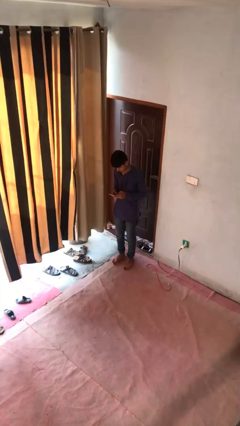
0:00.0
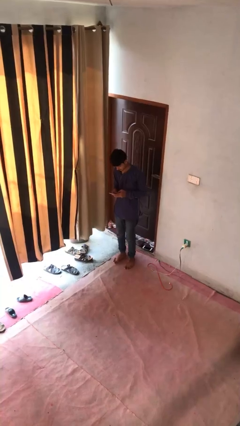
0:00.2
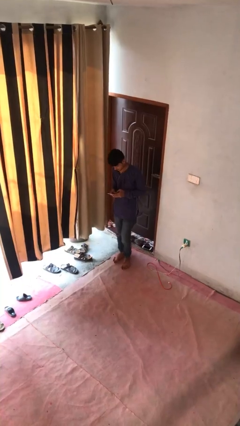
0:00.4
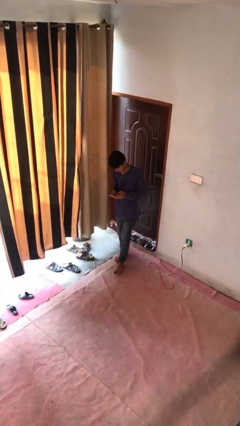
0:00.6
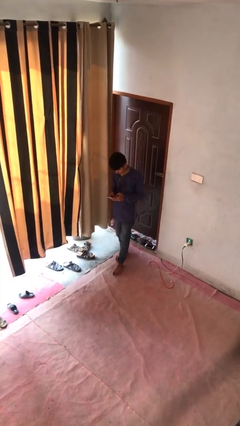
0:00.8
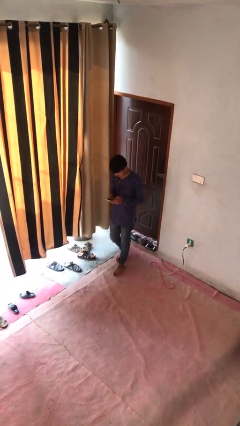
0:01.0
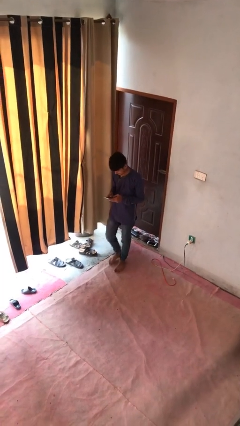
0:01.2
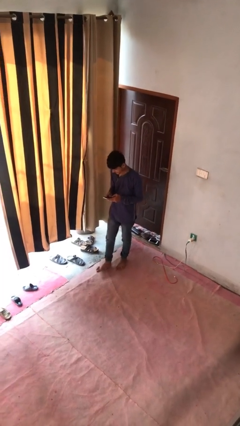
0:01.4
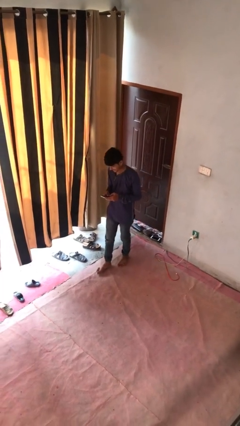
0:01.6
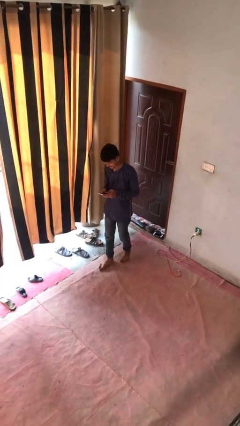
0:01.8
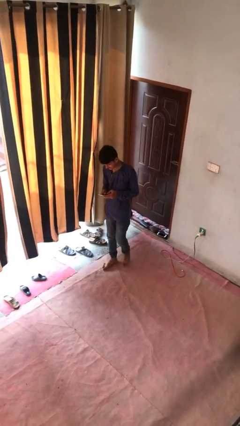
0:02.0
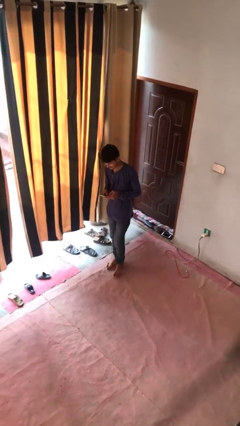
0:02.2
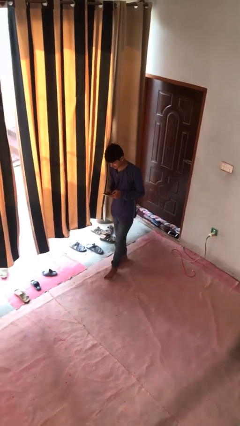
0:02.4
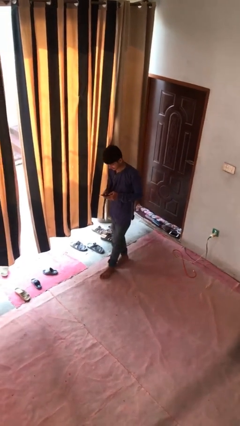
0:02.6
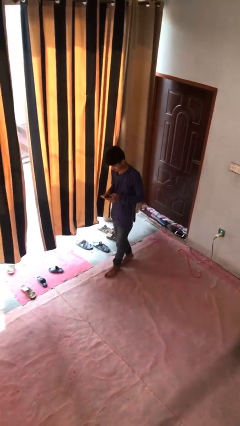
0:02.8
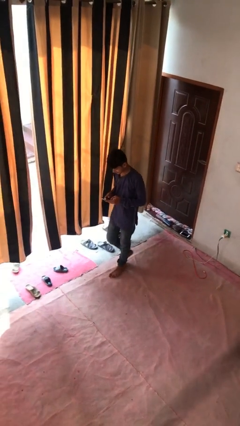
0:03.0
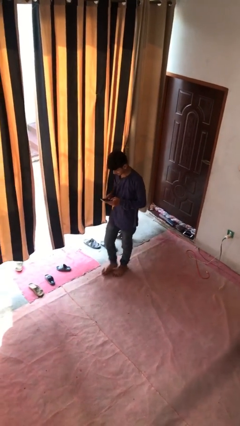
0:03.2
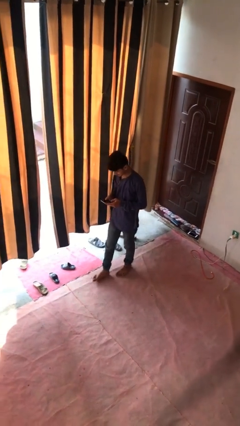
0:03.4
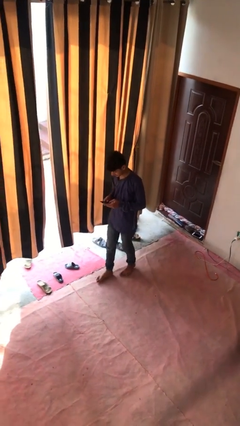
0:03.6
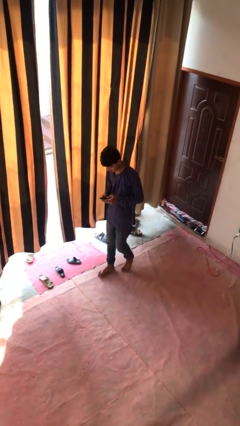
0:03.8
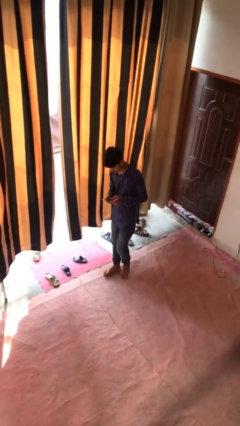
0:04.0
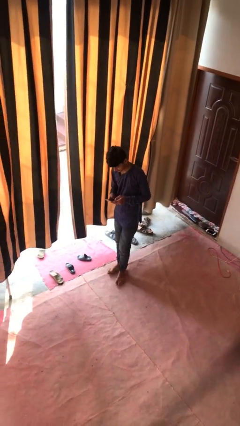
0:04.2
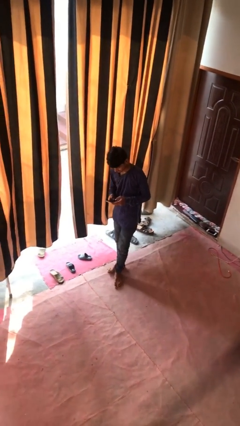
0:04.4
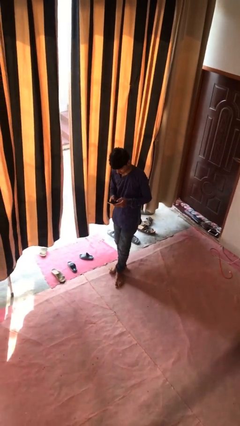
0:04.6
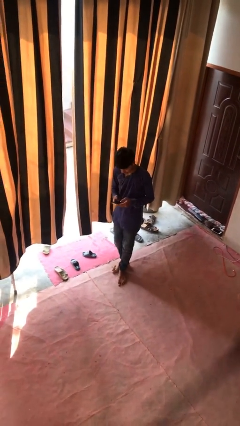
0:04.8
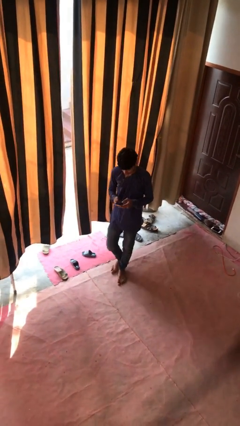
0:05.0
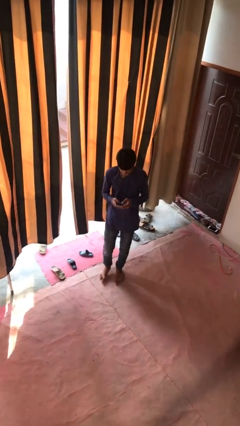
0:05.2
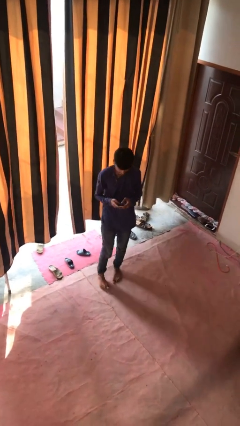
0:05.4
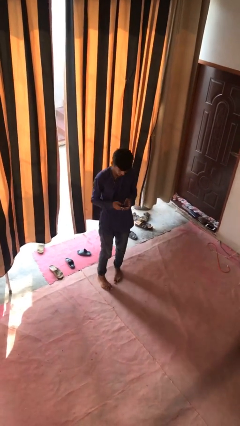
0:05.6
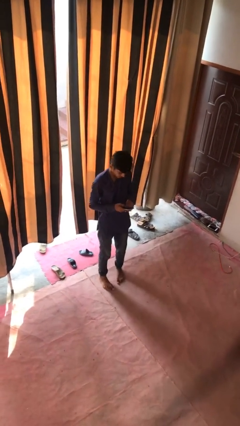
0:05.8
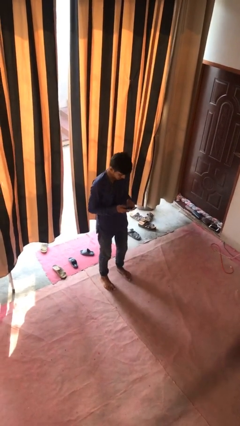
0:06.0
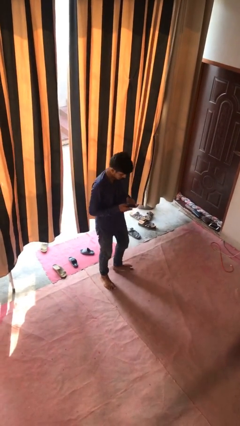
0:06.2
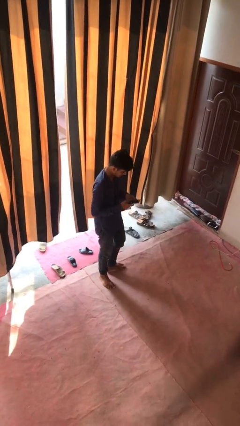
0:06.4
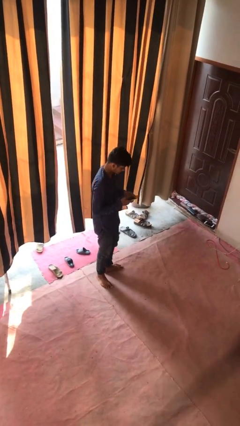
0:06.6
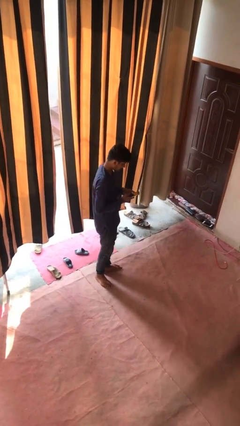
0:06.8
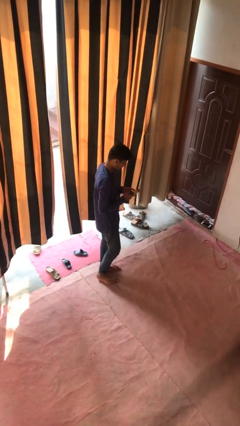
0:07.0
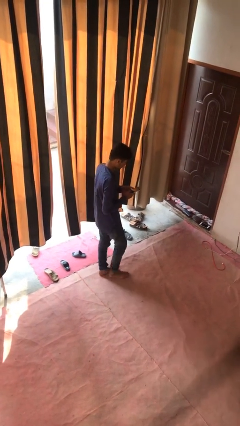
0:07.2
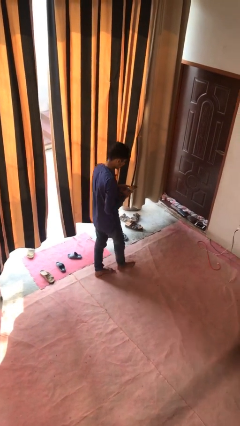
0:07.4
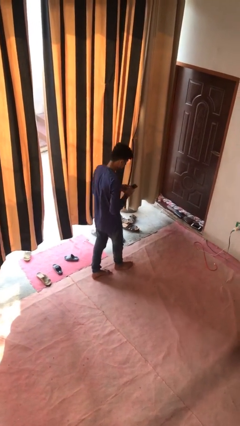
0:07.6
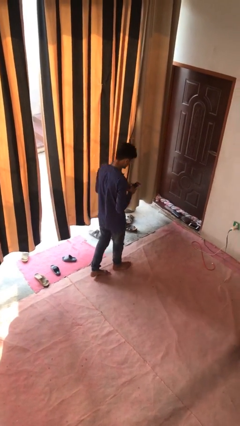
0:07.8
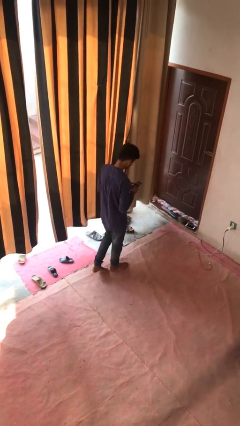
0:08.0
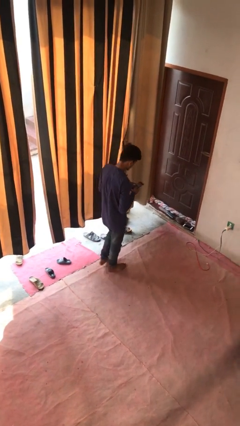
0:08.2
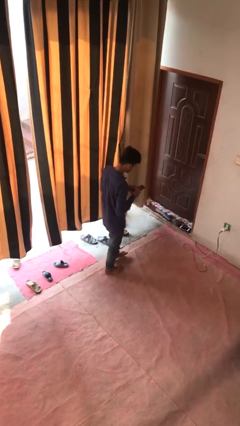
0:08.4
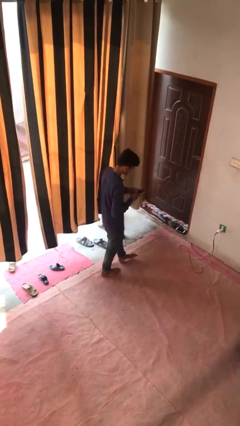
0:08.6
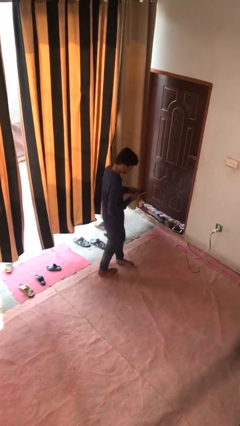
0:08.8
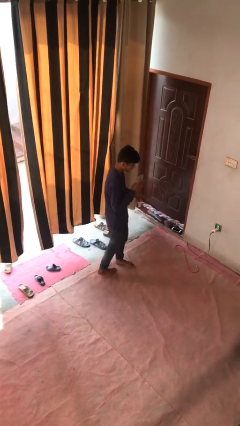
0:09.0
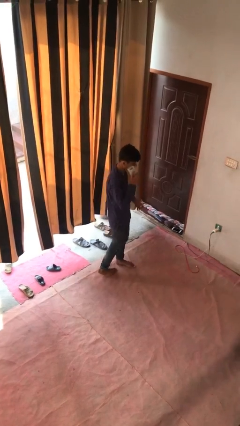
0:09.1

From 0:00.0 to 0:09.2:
person texts on phone

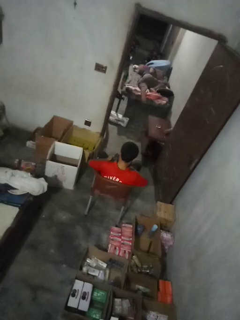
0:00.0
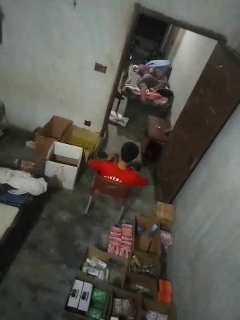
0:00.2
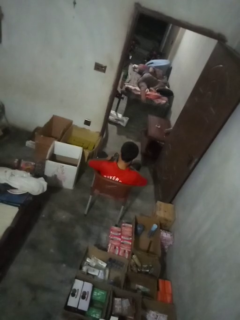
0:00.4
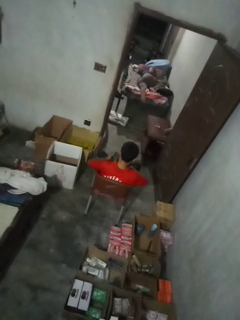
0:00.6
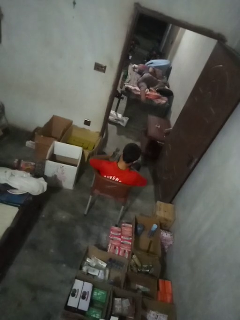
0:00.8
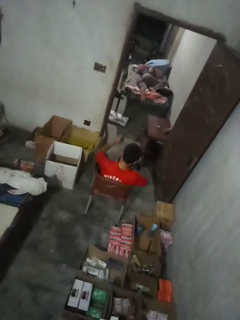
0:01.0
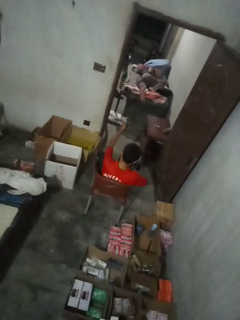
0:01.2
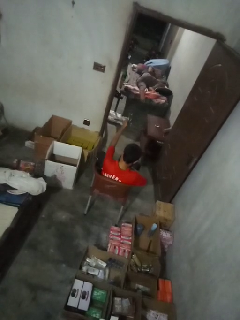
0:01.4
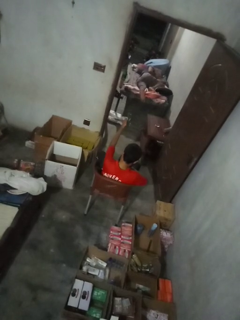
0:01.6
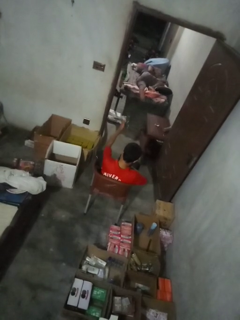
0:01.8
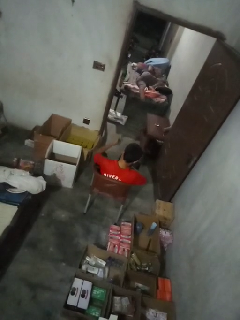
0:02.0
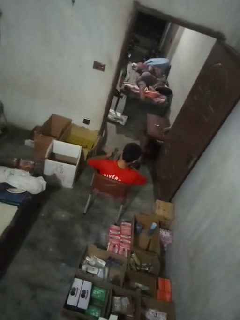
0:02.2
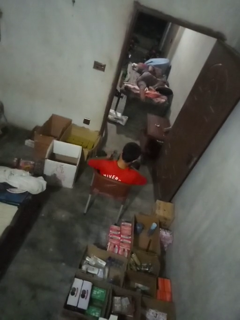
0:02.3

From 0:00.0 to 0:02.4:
person uses television remote

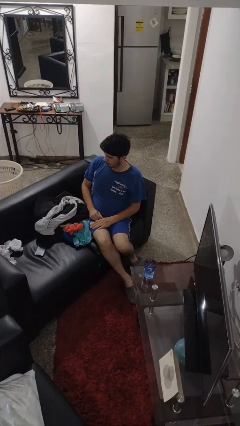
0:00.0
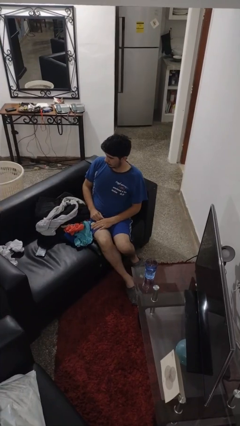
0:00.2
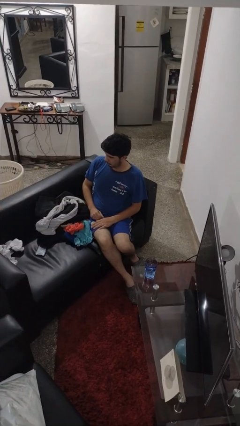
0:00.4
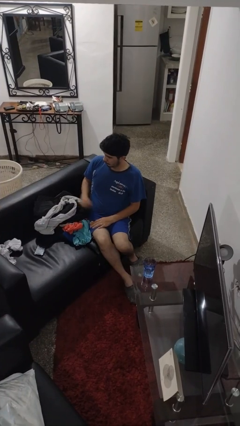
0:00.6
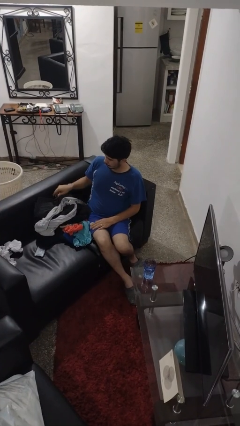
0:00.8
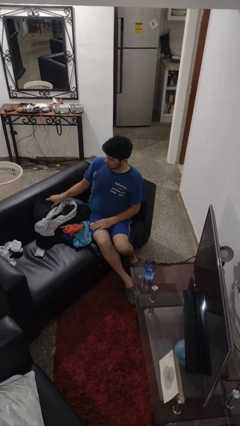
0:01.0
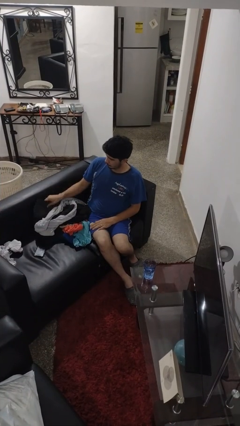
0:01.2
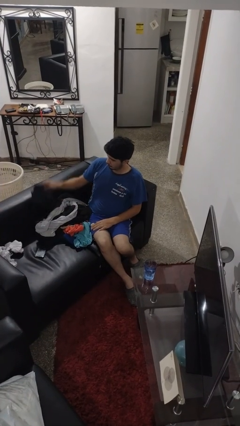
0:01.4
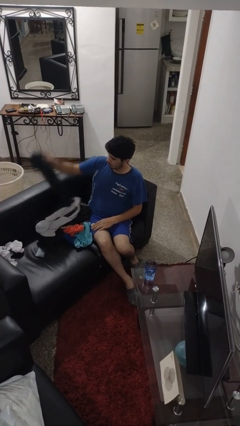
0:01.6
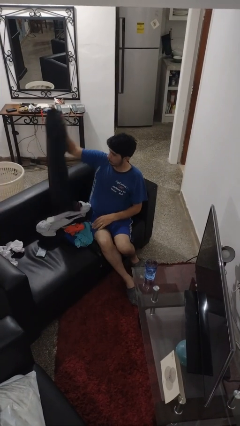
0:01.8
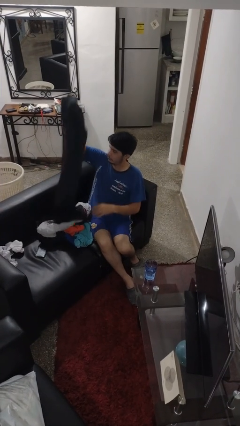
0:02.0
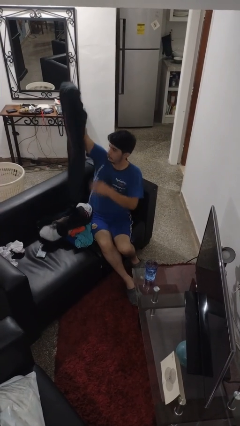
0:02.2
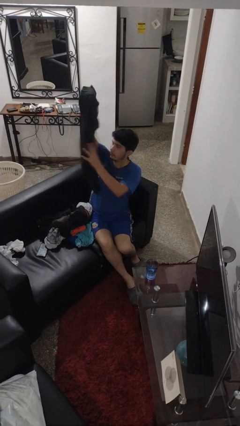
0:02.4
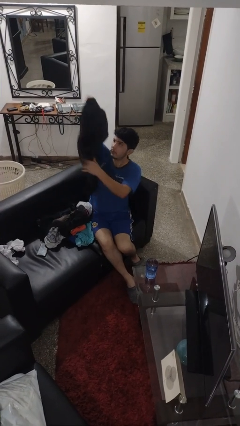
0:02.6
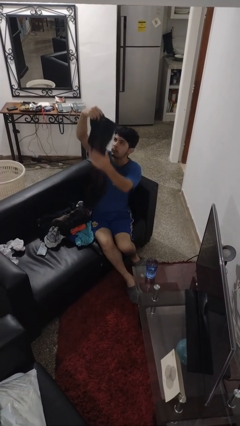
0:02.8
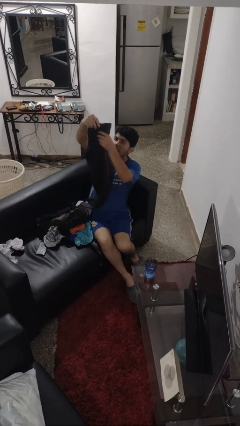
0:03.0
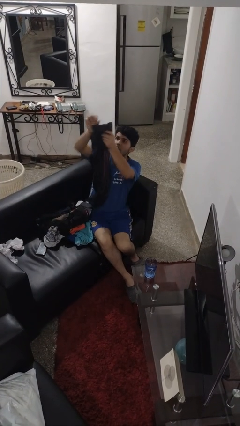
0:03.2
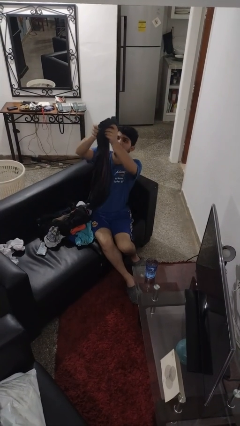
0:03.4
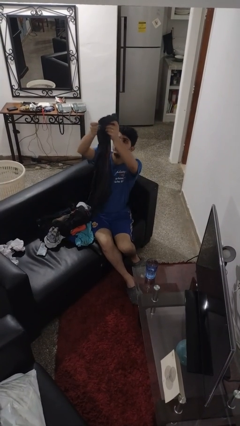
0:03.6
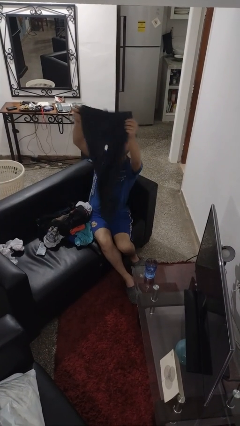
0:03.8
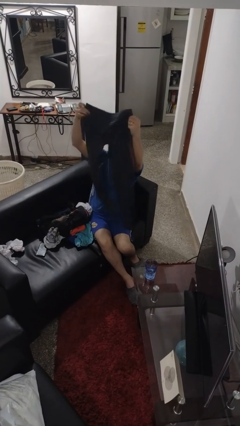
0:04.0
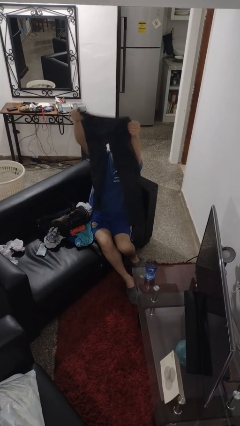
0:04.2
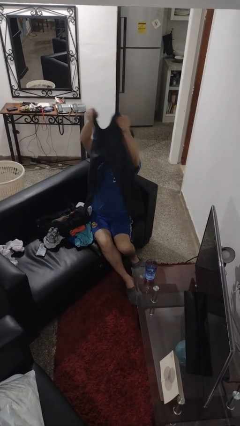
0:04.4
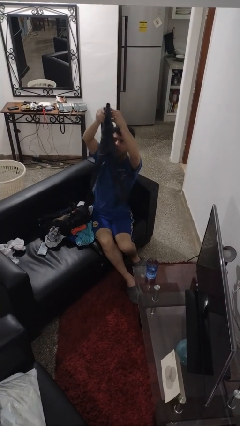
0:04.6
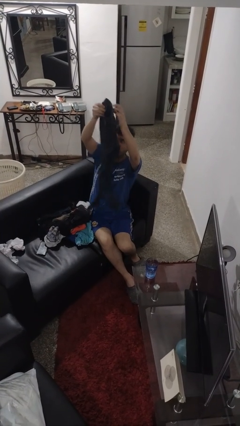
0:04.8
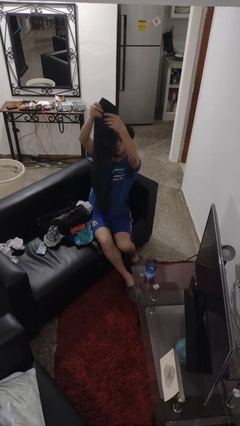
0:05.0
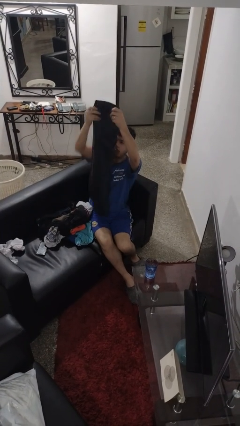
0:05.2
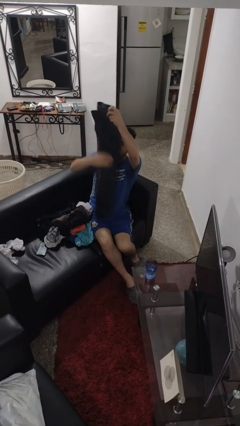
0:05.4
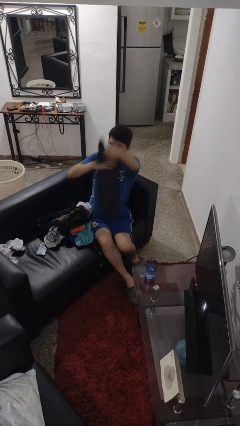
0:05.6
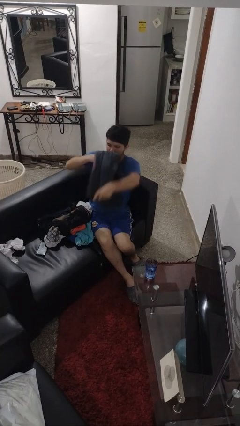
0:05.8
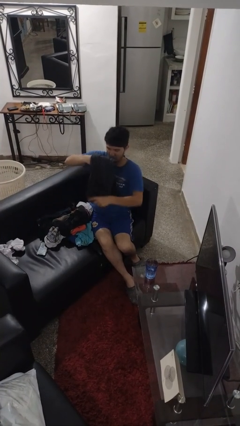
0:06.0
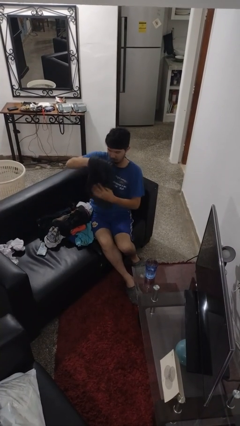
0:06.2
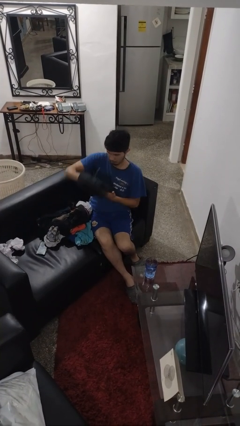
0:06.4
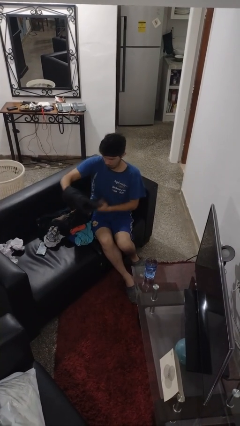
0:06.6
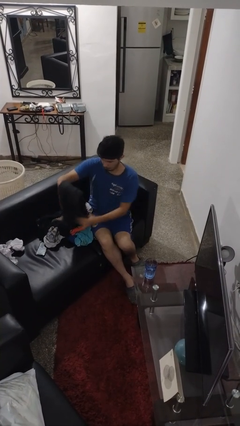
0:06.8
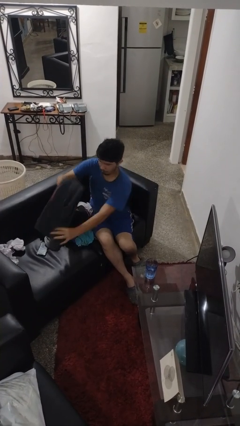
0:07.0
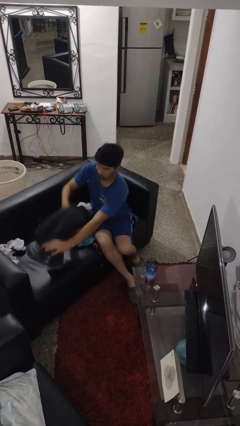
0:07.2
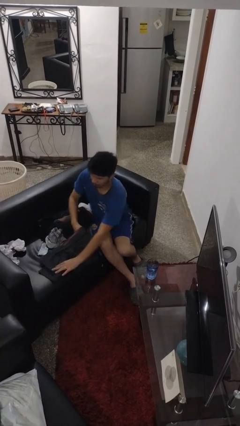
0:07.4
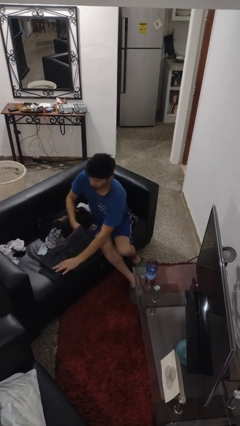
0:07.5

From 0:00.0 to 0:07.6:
person folds pants
